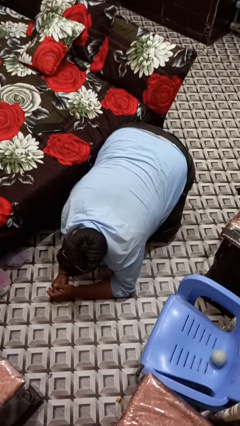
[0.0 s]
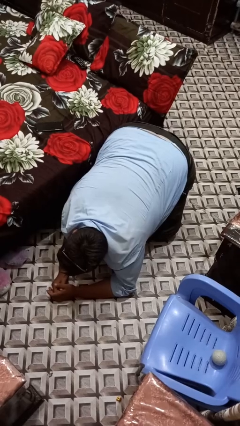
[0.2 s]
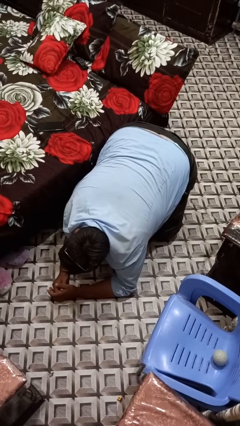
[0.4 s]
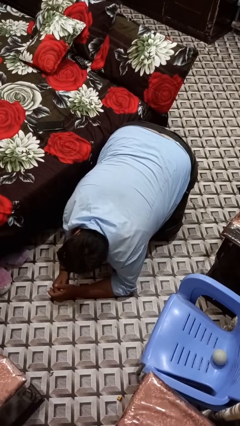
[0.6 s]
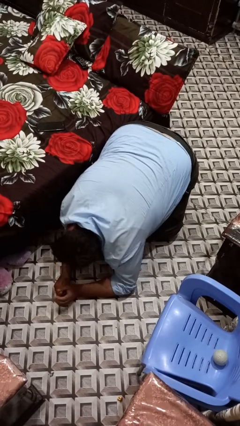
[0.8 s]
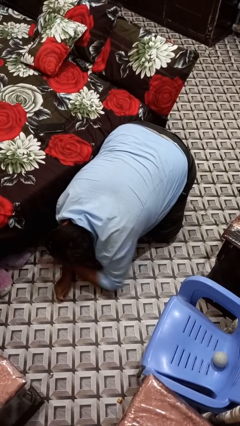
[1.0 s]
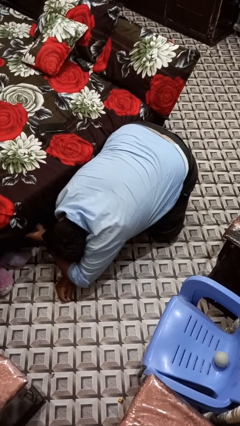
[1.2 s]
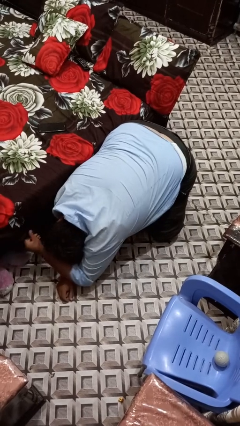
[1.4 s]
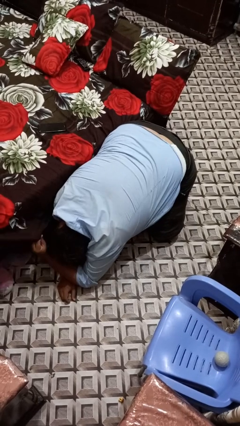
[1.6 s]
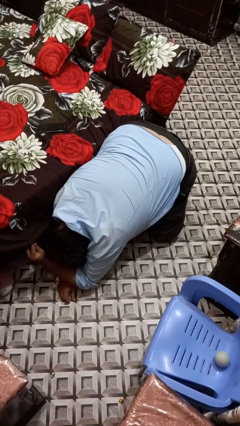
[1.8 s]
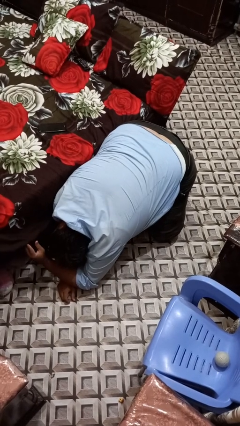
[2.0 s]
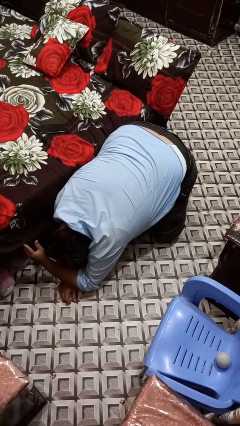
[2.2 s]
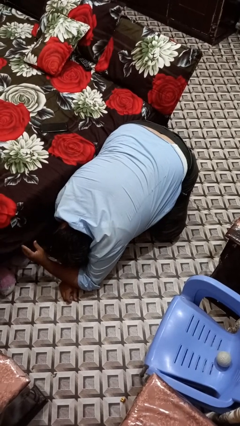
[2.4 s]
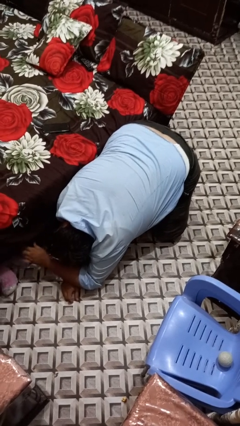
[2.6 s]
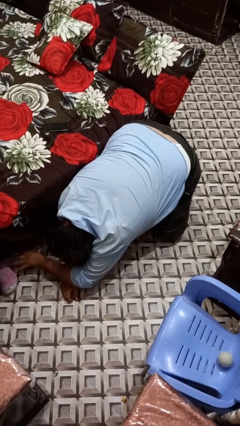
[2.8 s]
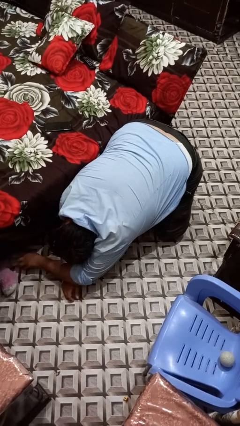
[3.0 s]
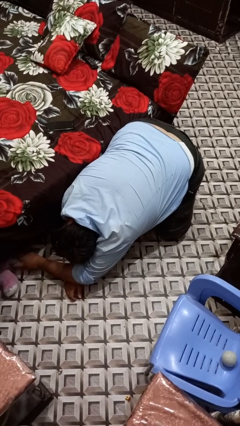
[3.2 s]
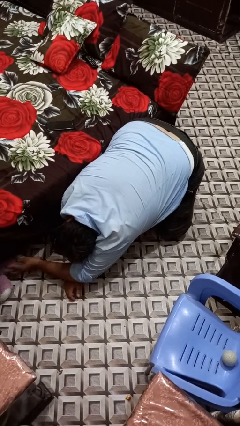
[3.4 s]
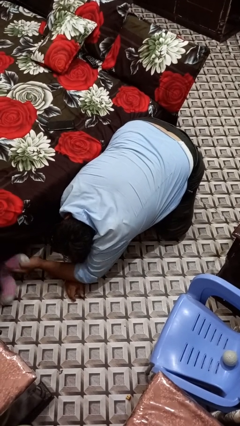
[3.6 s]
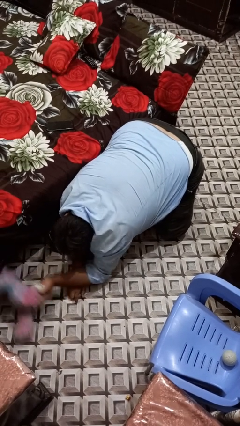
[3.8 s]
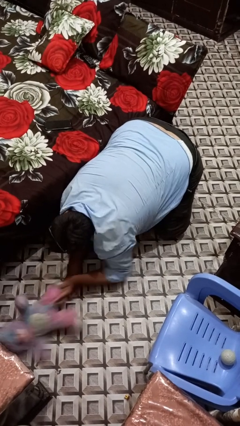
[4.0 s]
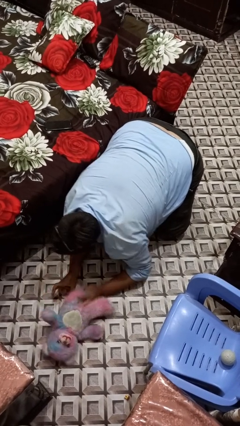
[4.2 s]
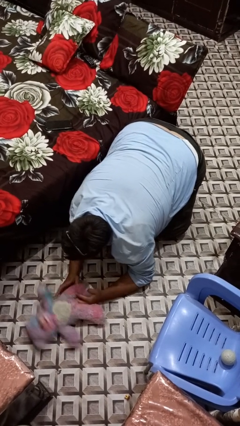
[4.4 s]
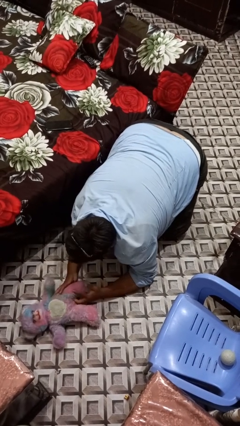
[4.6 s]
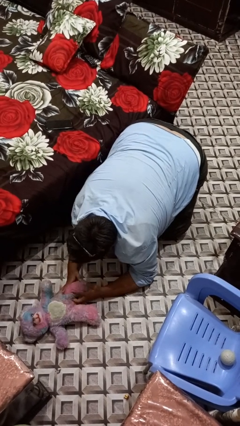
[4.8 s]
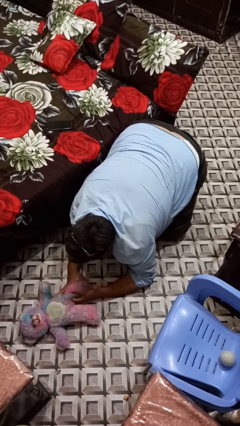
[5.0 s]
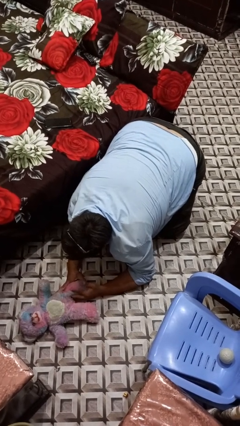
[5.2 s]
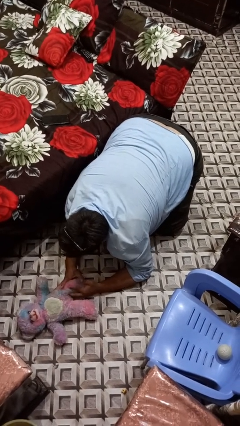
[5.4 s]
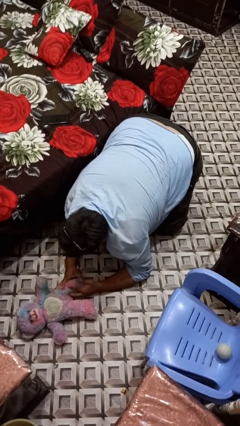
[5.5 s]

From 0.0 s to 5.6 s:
person searches under bed

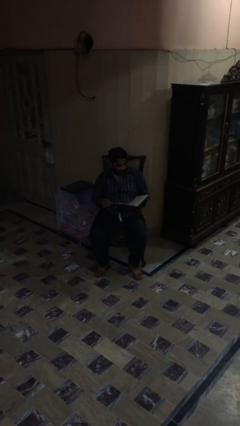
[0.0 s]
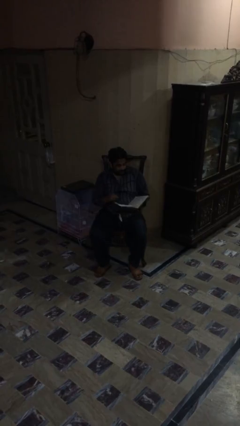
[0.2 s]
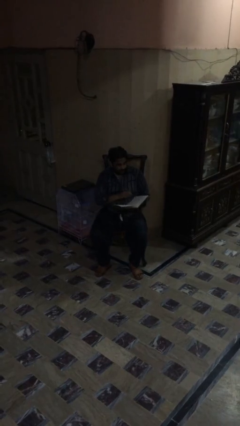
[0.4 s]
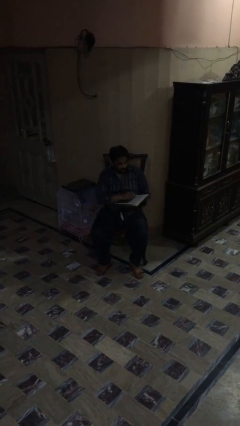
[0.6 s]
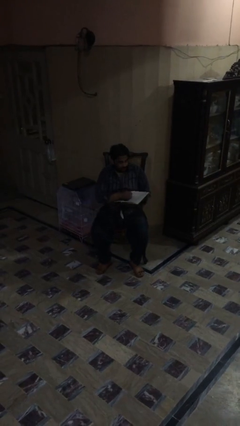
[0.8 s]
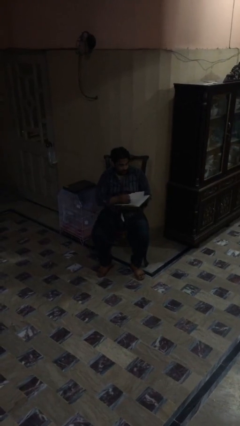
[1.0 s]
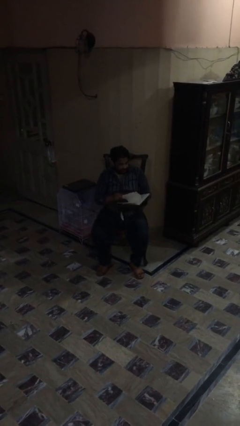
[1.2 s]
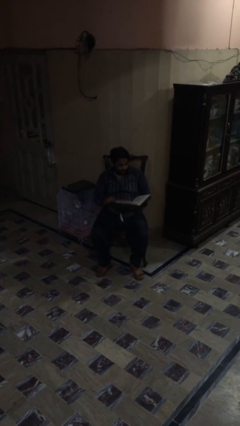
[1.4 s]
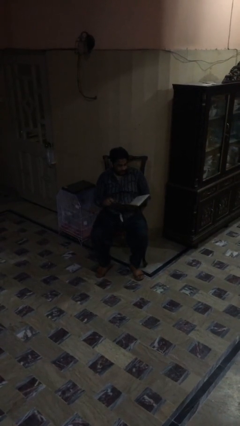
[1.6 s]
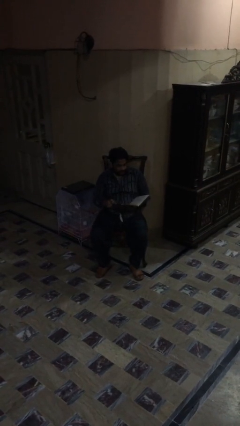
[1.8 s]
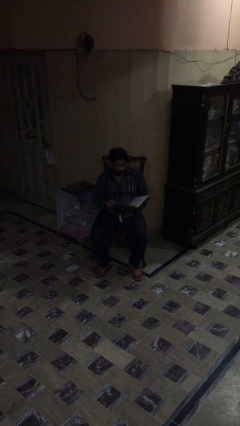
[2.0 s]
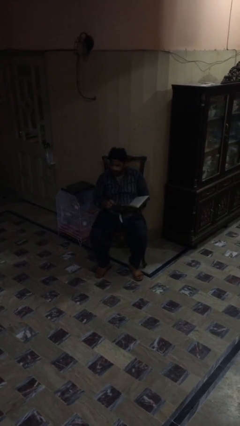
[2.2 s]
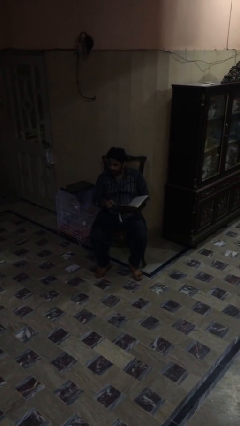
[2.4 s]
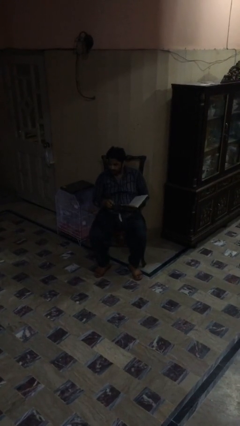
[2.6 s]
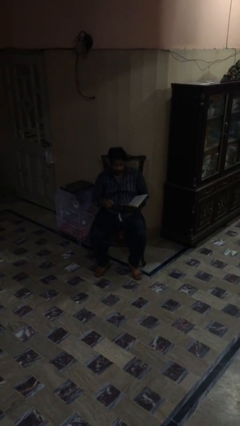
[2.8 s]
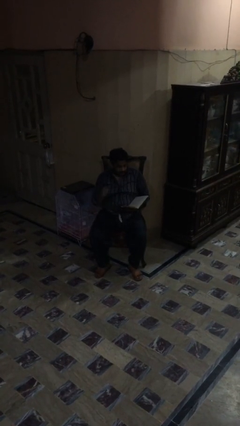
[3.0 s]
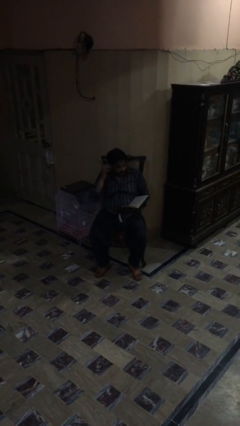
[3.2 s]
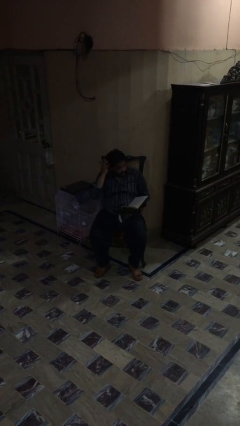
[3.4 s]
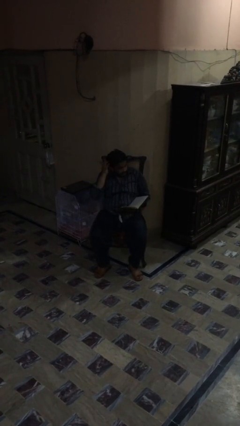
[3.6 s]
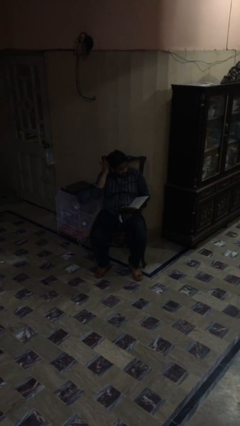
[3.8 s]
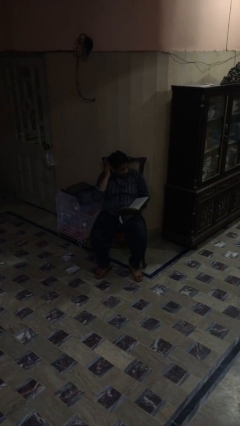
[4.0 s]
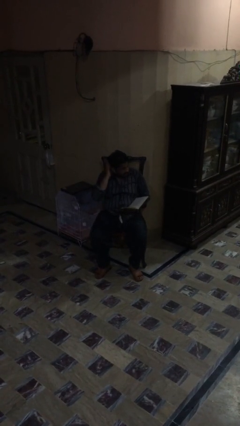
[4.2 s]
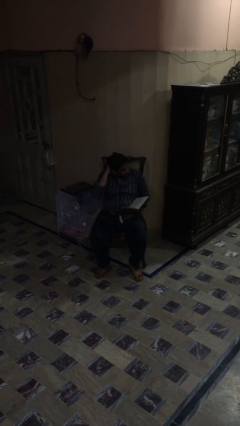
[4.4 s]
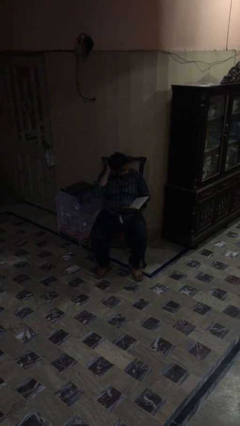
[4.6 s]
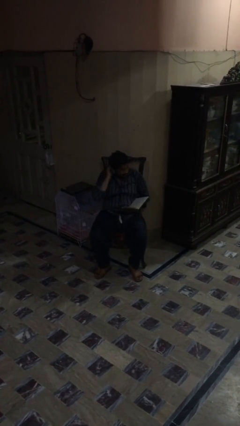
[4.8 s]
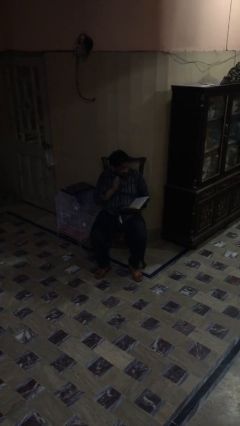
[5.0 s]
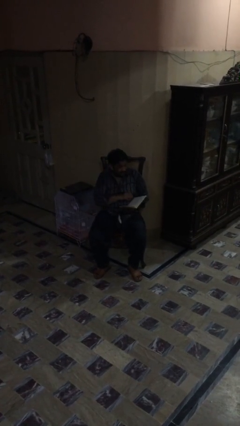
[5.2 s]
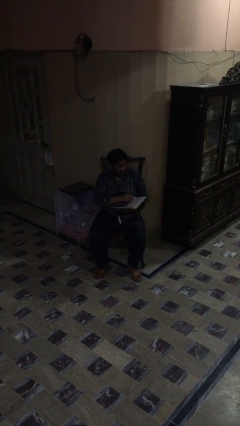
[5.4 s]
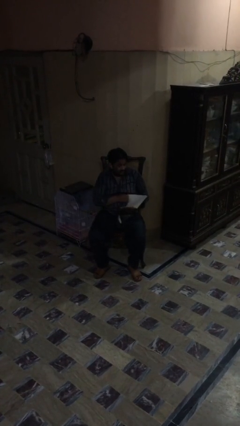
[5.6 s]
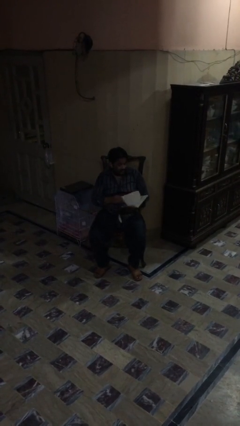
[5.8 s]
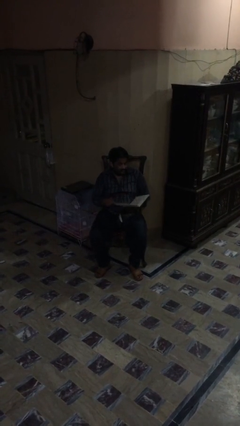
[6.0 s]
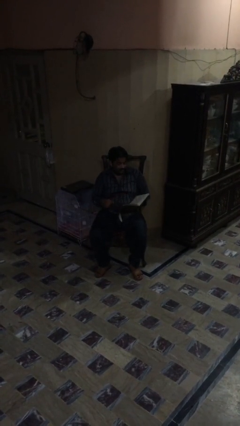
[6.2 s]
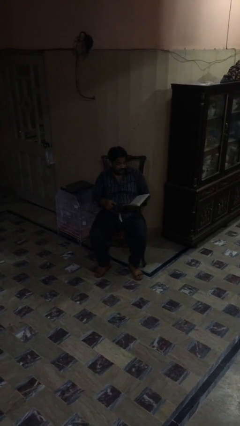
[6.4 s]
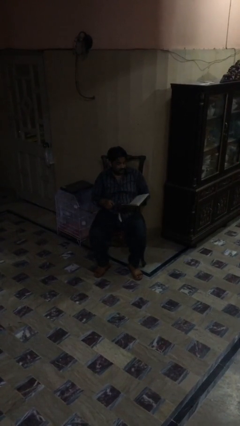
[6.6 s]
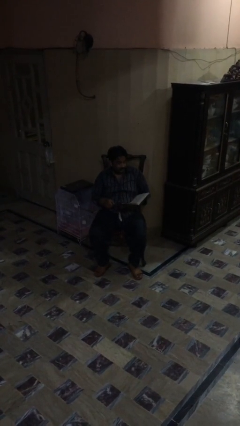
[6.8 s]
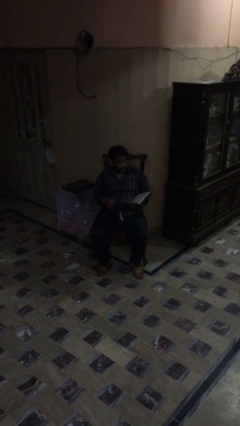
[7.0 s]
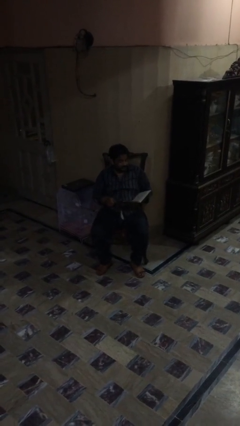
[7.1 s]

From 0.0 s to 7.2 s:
person reads document

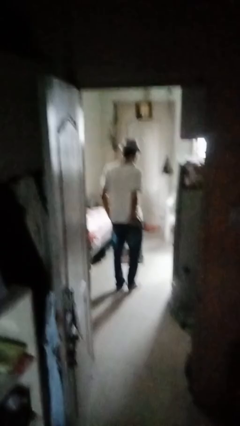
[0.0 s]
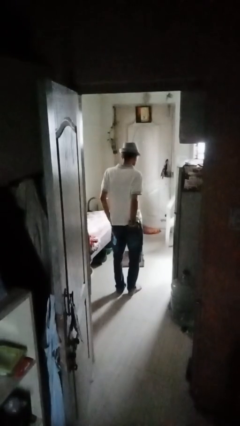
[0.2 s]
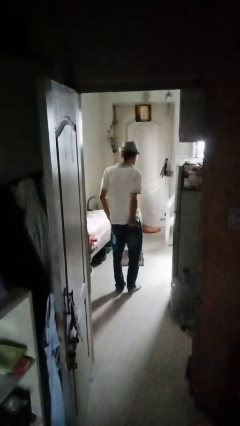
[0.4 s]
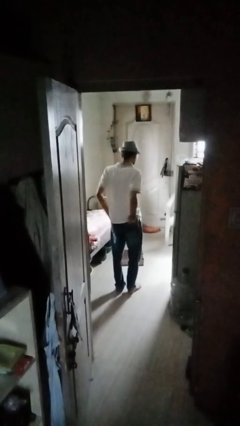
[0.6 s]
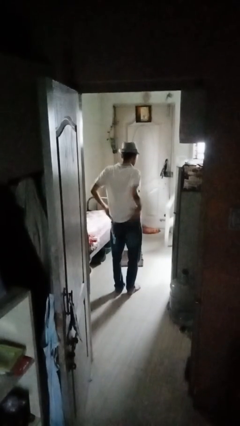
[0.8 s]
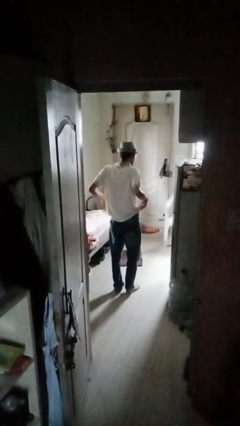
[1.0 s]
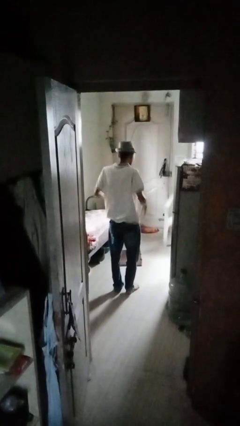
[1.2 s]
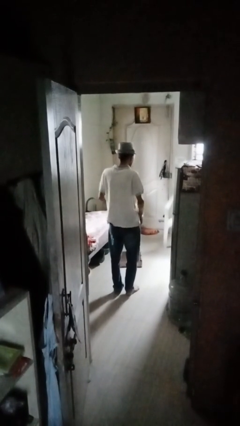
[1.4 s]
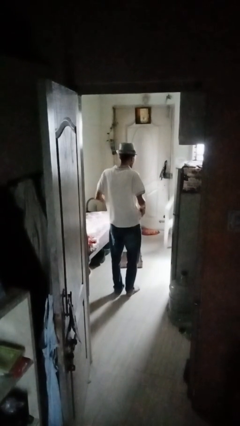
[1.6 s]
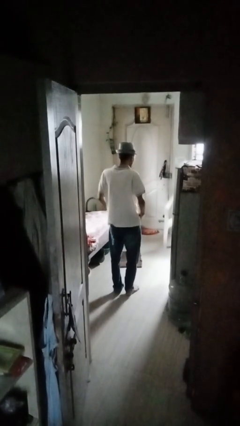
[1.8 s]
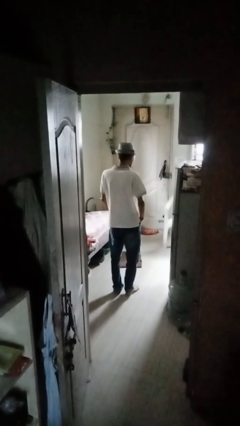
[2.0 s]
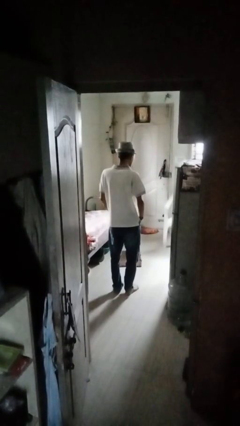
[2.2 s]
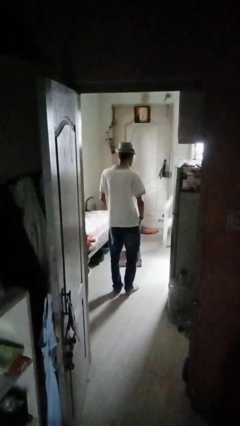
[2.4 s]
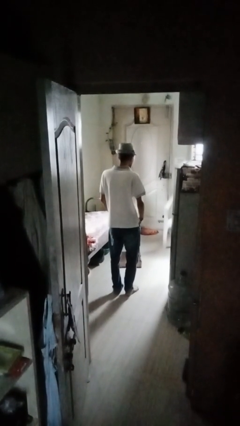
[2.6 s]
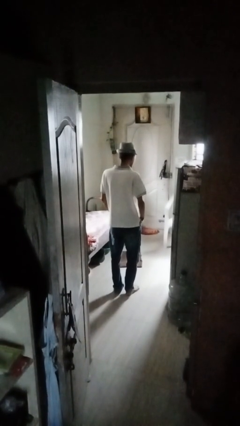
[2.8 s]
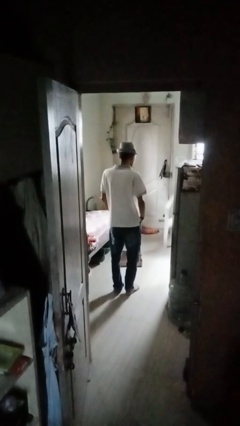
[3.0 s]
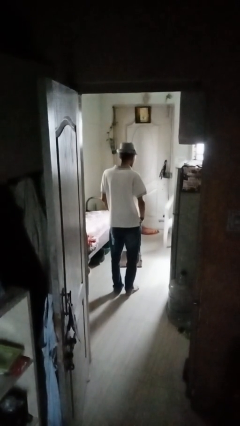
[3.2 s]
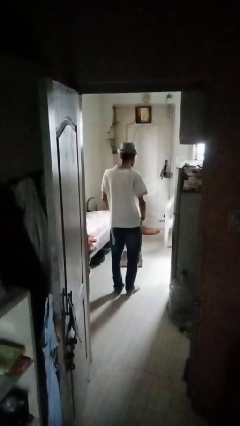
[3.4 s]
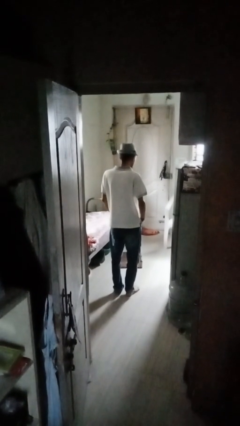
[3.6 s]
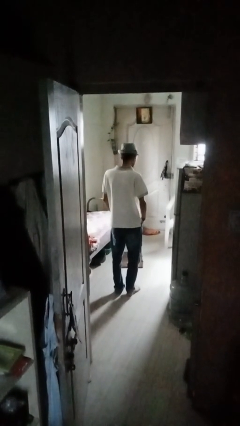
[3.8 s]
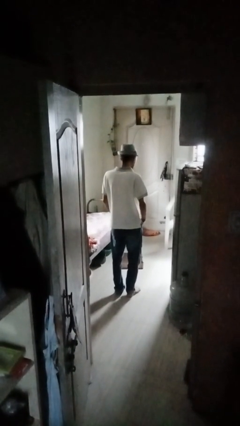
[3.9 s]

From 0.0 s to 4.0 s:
person puts hands in back pockets

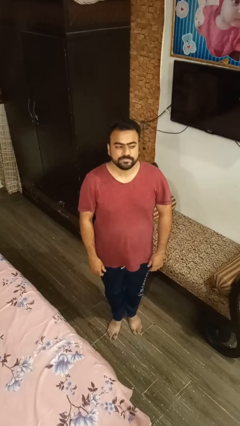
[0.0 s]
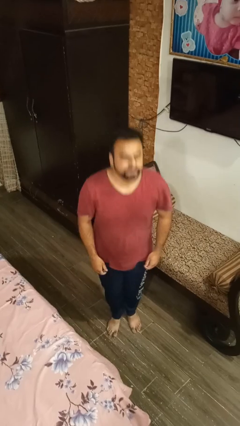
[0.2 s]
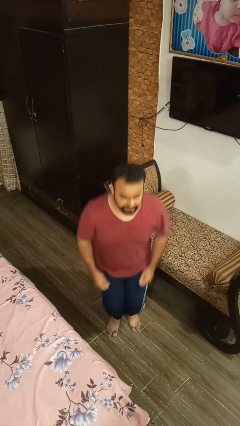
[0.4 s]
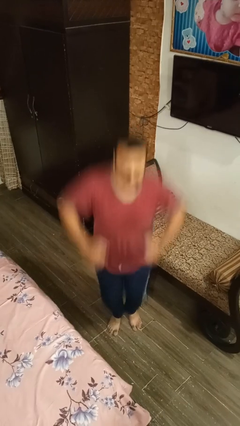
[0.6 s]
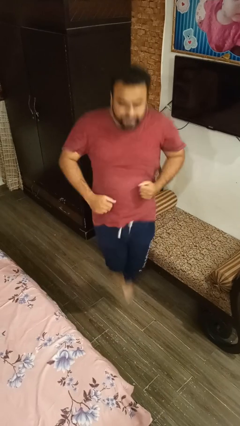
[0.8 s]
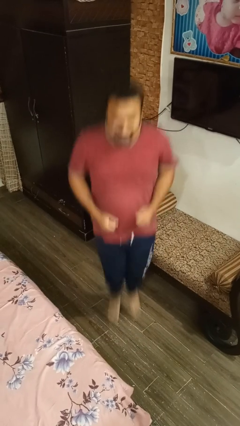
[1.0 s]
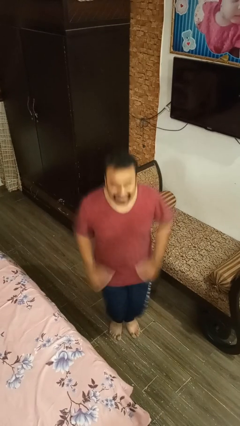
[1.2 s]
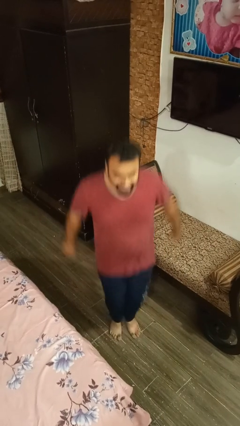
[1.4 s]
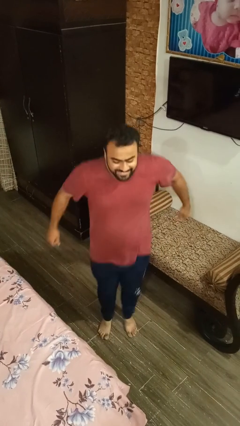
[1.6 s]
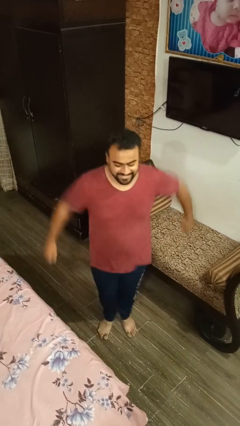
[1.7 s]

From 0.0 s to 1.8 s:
person jumps
